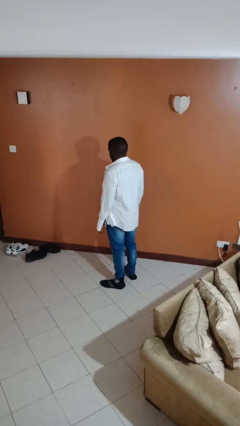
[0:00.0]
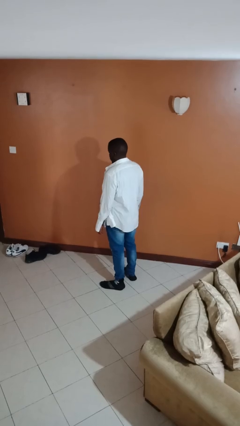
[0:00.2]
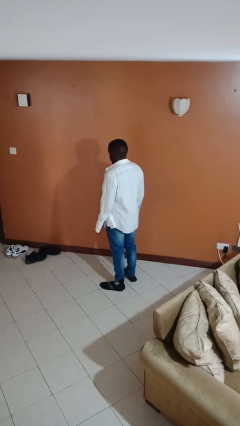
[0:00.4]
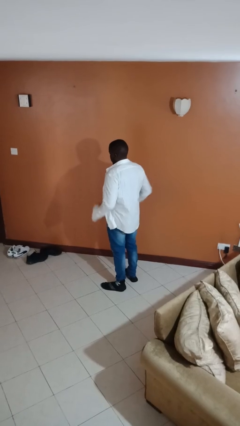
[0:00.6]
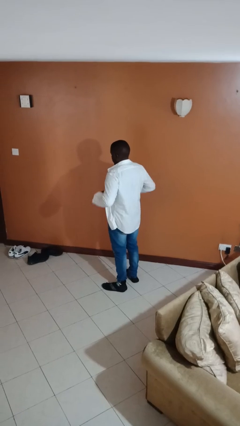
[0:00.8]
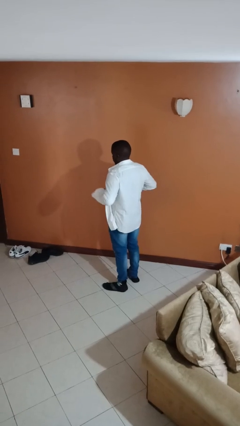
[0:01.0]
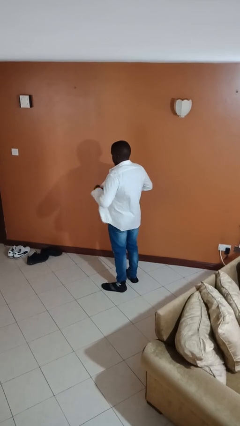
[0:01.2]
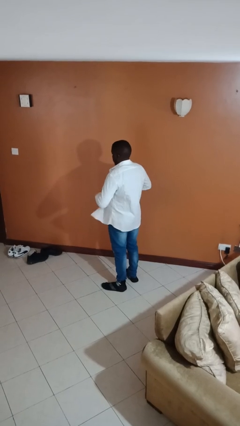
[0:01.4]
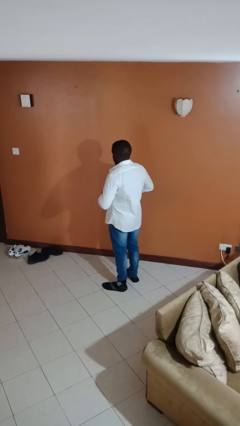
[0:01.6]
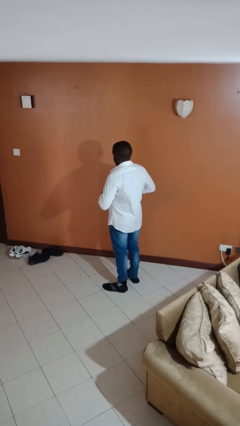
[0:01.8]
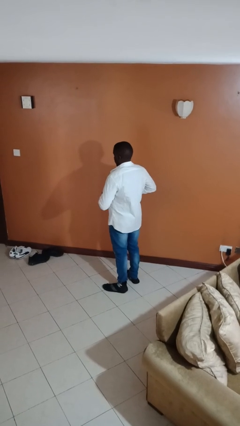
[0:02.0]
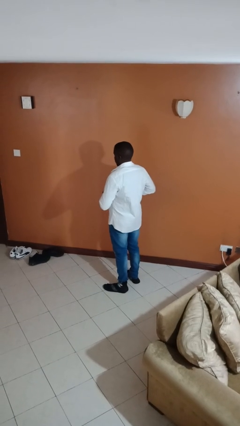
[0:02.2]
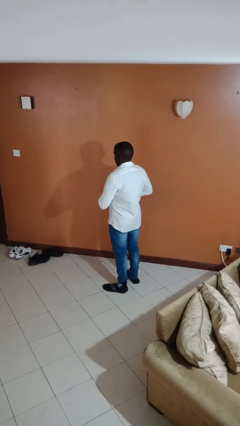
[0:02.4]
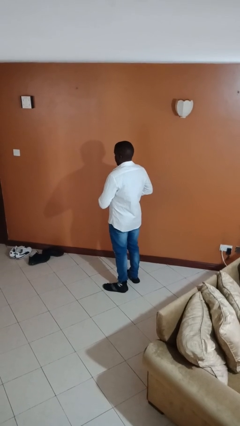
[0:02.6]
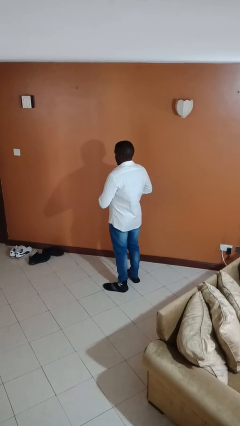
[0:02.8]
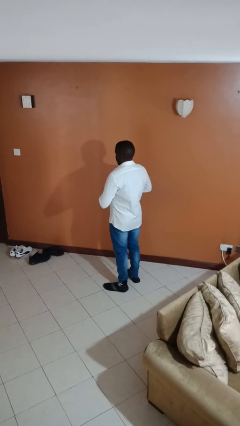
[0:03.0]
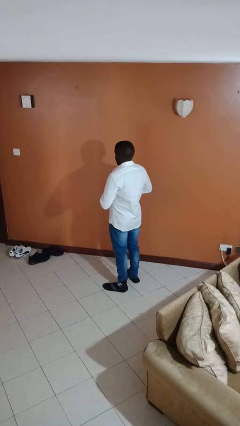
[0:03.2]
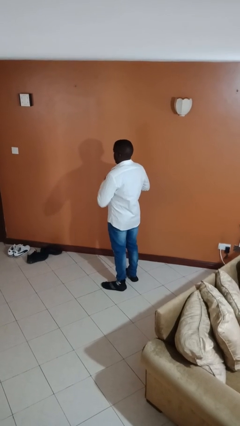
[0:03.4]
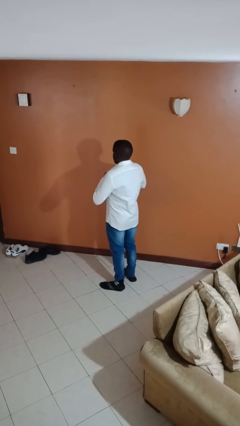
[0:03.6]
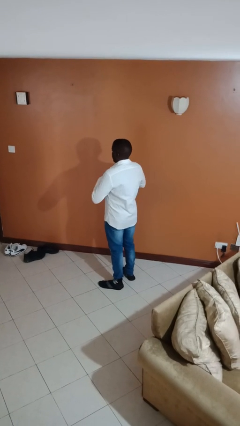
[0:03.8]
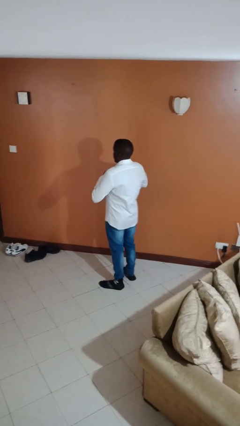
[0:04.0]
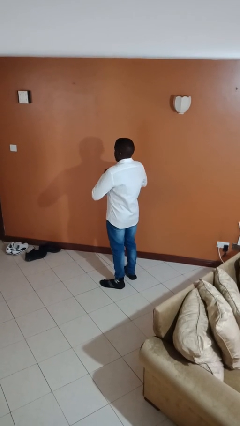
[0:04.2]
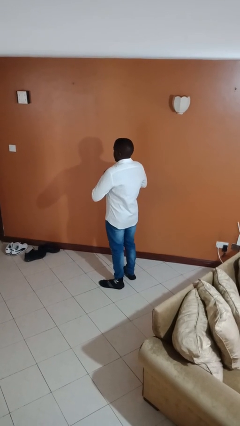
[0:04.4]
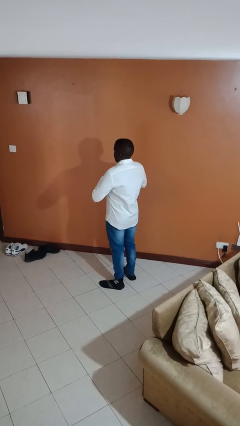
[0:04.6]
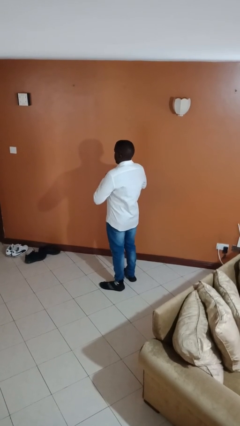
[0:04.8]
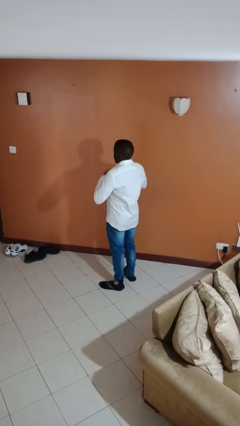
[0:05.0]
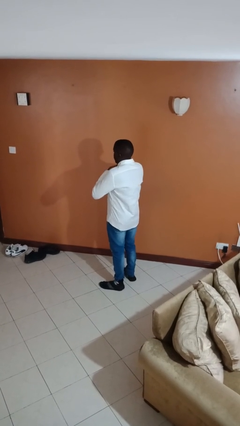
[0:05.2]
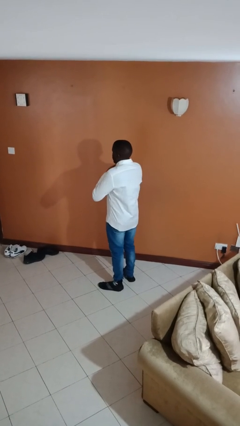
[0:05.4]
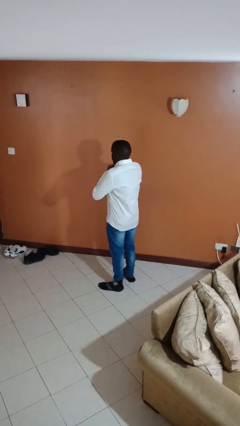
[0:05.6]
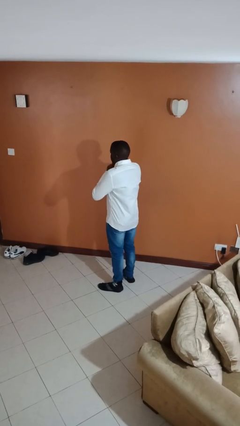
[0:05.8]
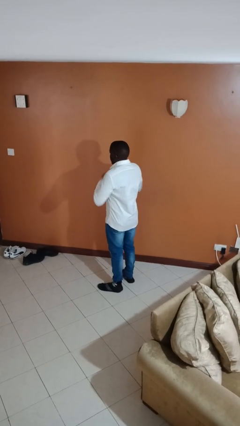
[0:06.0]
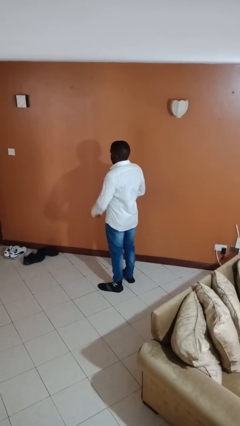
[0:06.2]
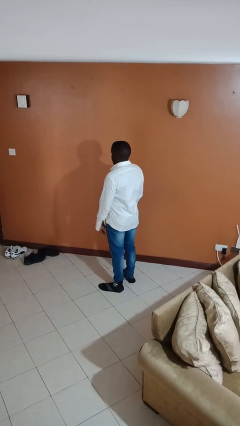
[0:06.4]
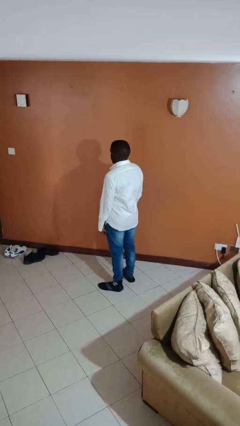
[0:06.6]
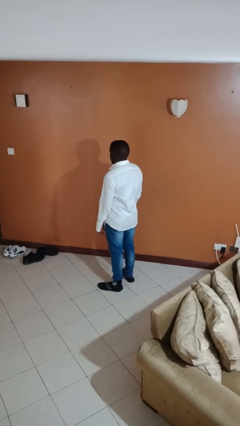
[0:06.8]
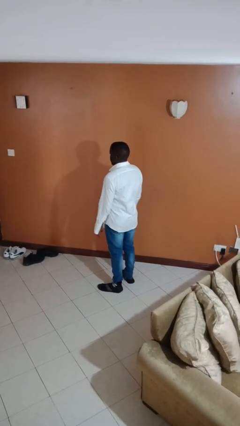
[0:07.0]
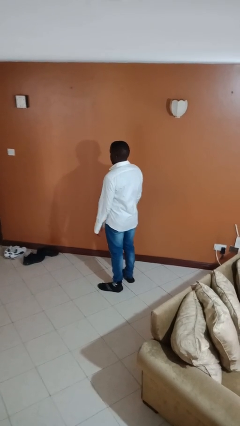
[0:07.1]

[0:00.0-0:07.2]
person buttons shirt

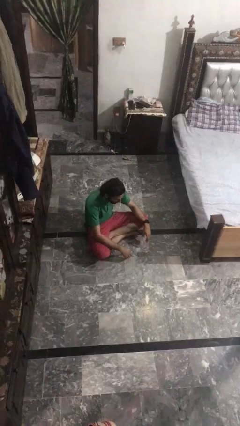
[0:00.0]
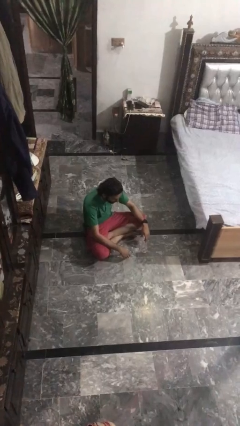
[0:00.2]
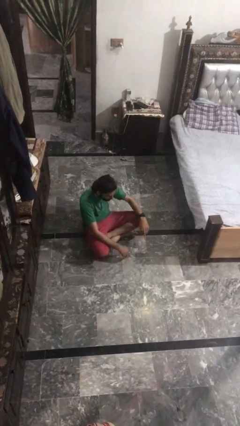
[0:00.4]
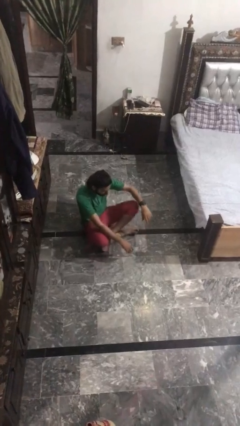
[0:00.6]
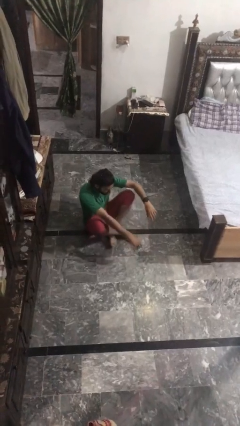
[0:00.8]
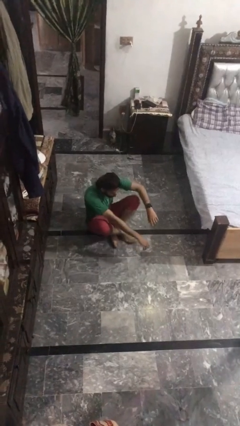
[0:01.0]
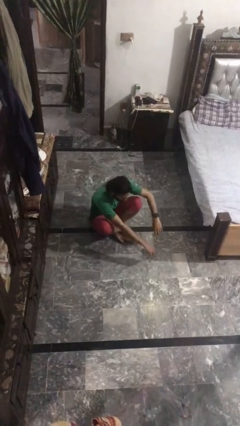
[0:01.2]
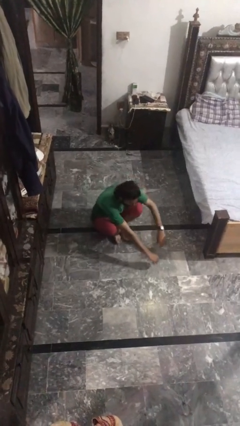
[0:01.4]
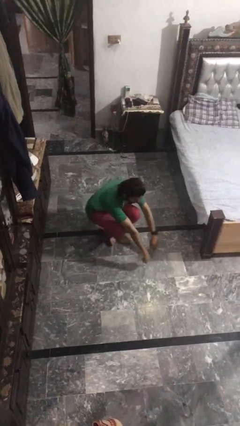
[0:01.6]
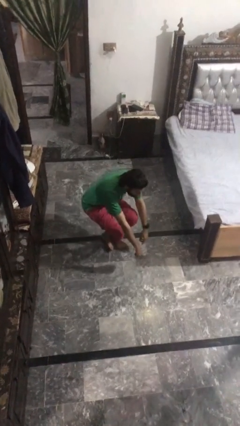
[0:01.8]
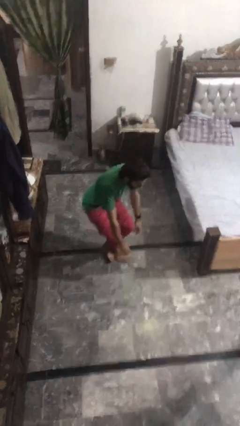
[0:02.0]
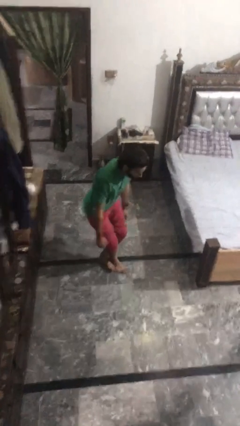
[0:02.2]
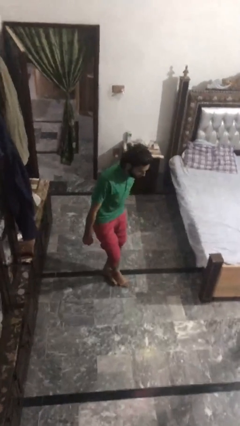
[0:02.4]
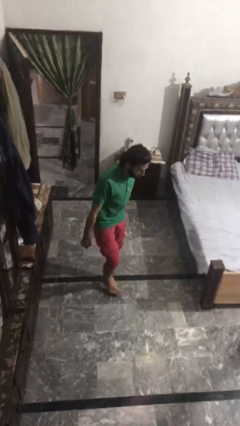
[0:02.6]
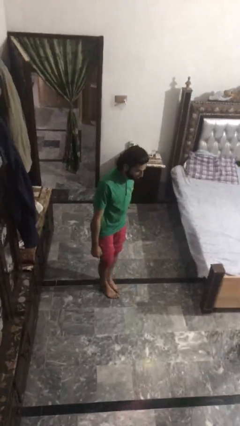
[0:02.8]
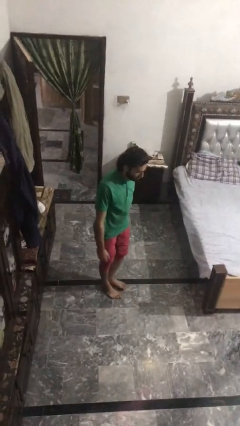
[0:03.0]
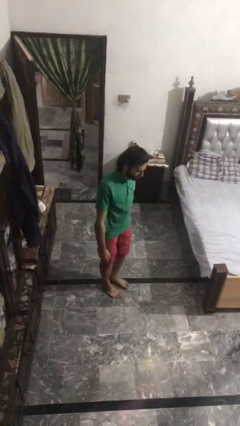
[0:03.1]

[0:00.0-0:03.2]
person stands up from floor

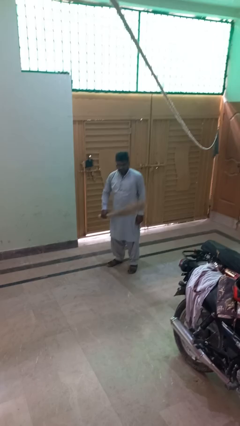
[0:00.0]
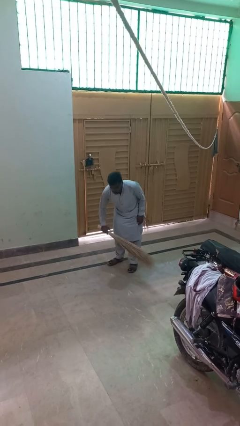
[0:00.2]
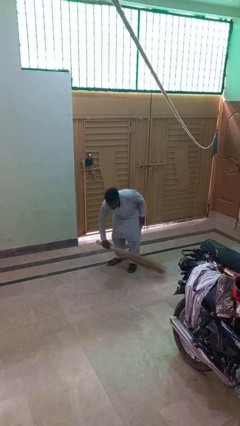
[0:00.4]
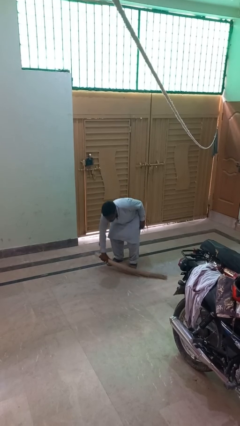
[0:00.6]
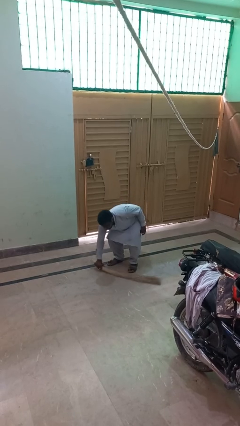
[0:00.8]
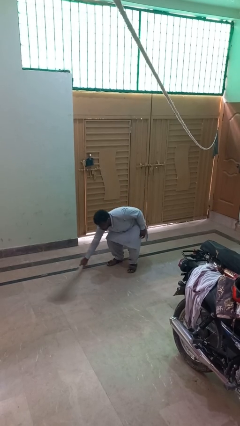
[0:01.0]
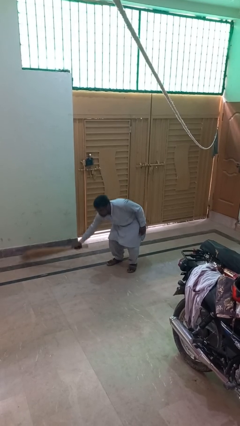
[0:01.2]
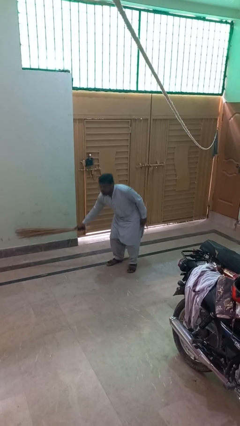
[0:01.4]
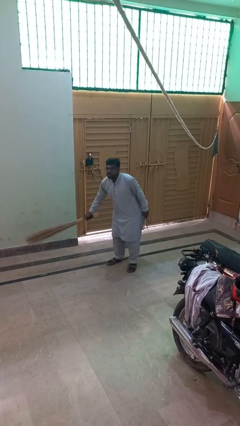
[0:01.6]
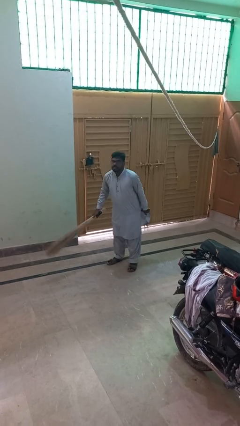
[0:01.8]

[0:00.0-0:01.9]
person sweeps floor

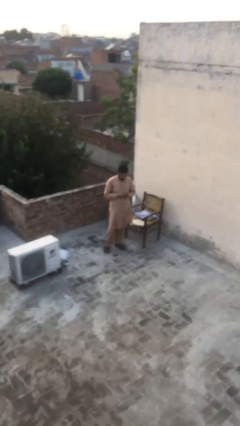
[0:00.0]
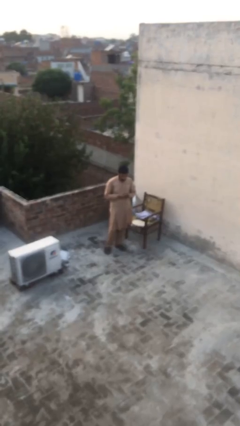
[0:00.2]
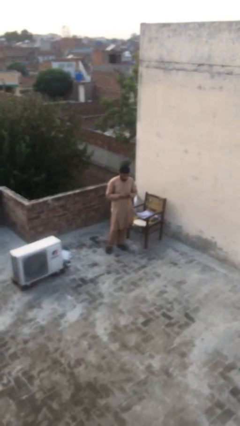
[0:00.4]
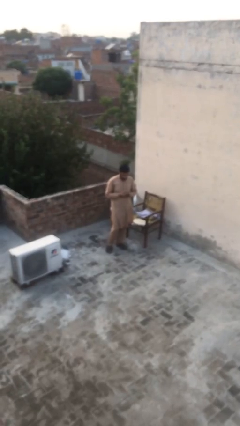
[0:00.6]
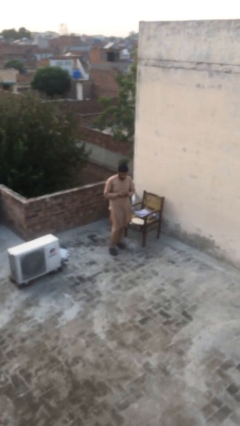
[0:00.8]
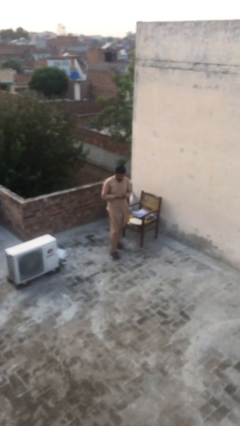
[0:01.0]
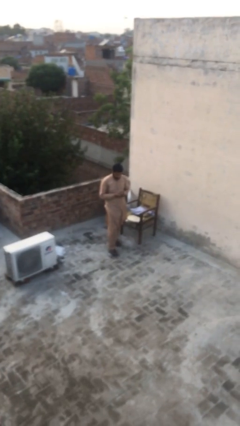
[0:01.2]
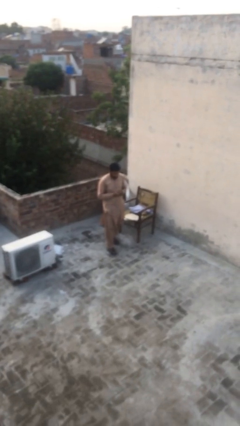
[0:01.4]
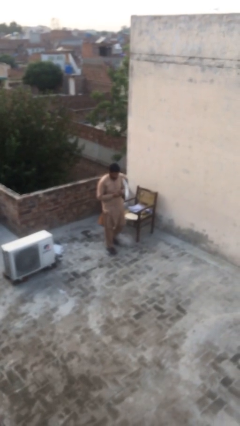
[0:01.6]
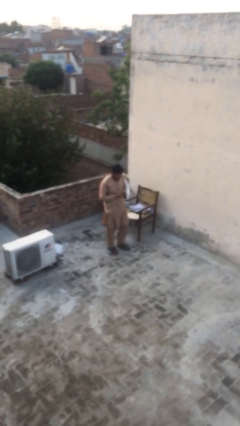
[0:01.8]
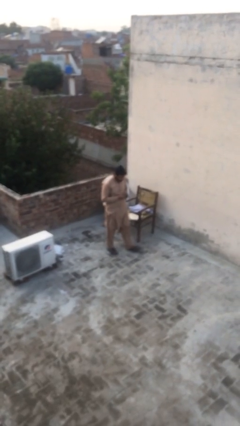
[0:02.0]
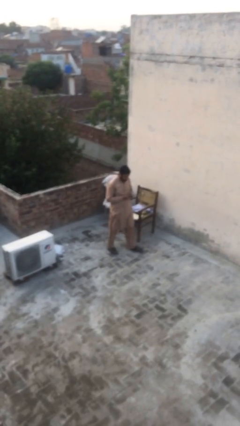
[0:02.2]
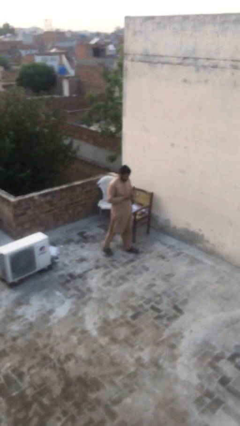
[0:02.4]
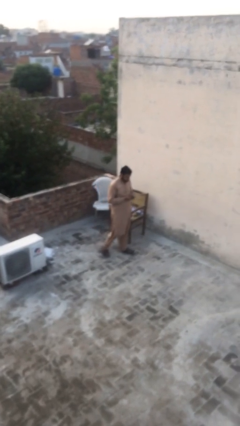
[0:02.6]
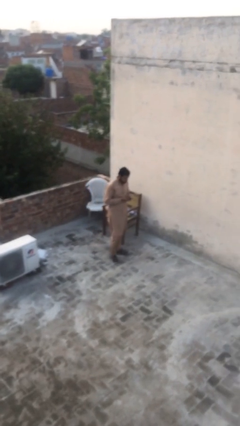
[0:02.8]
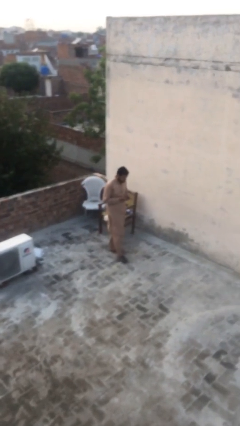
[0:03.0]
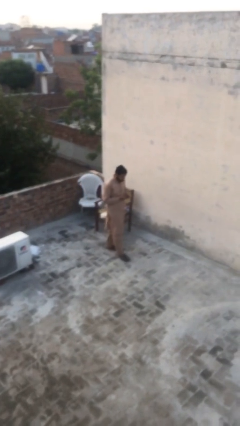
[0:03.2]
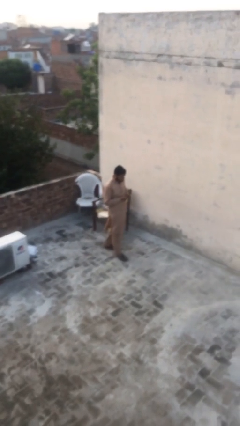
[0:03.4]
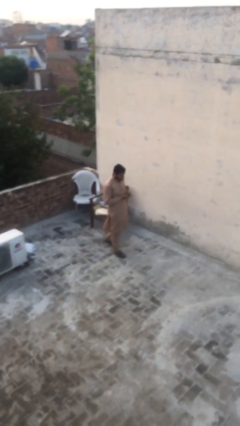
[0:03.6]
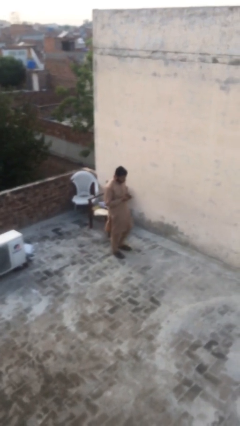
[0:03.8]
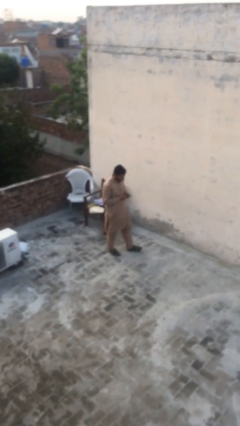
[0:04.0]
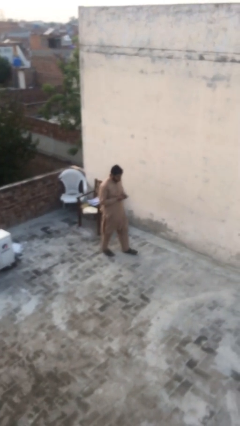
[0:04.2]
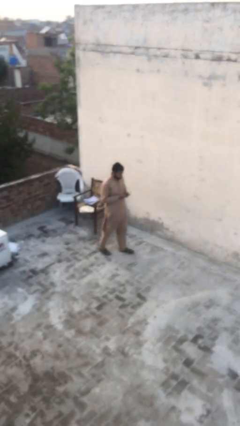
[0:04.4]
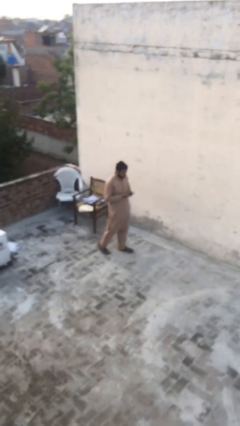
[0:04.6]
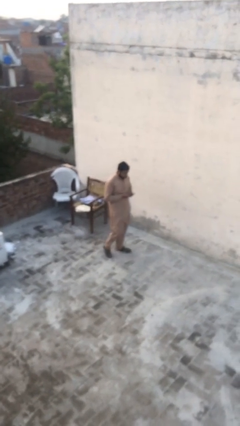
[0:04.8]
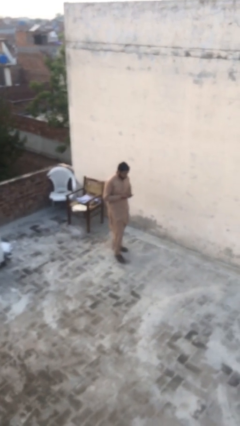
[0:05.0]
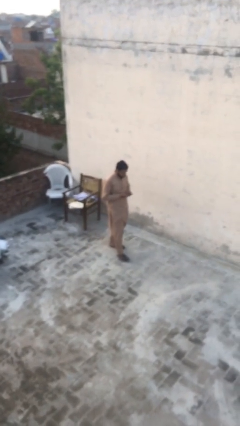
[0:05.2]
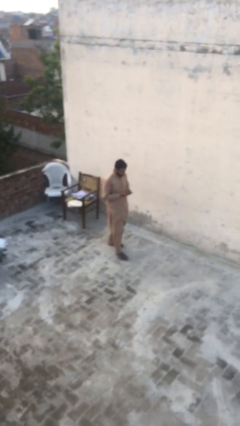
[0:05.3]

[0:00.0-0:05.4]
person texts on phone

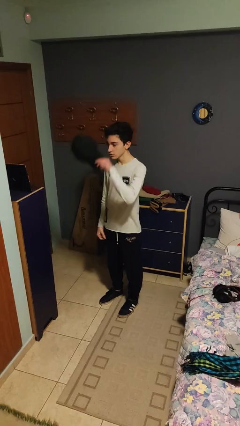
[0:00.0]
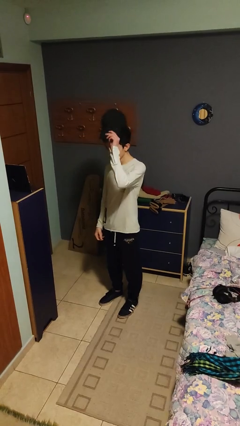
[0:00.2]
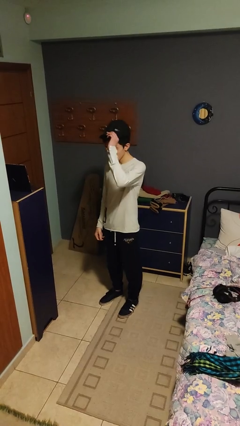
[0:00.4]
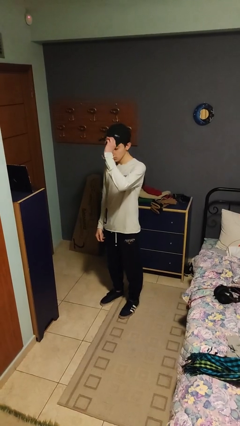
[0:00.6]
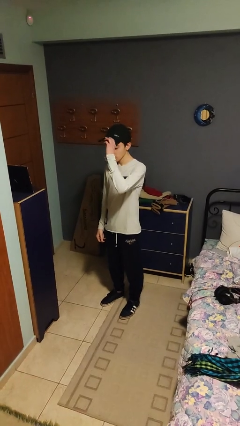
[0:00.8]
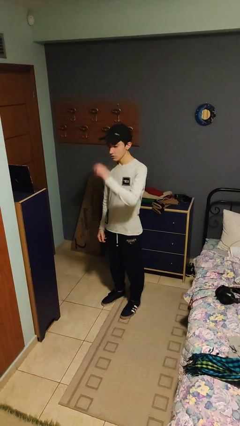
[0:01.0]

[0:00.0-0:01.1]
person puts on hat
